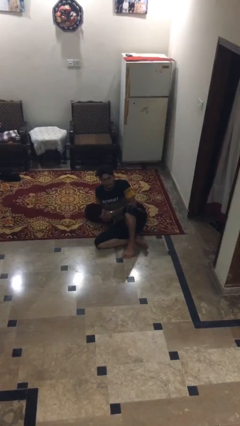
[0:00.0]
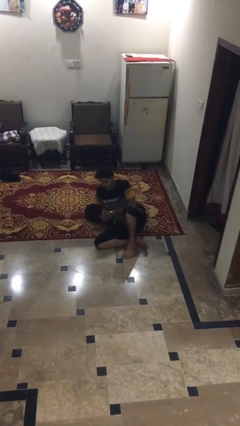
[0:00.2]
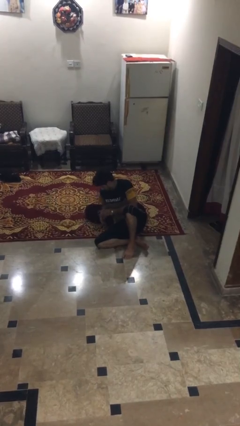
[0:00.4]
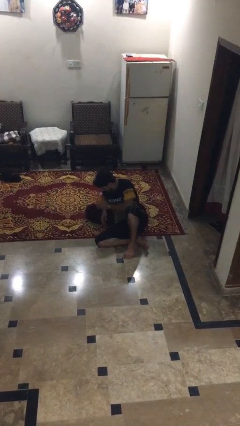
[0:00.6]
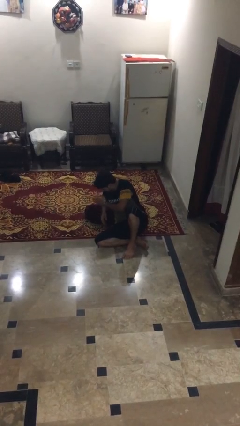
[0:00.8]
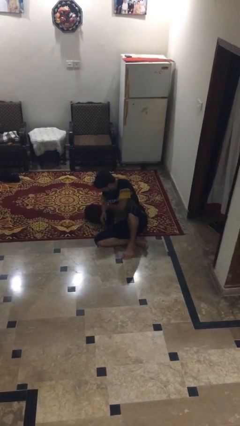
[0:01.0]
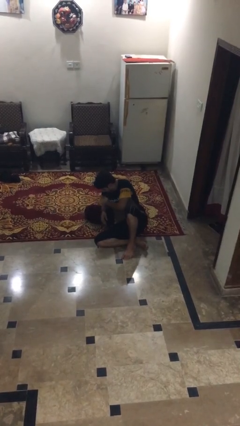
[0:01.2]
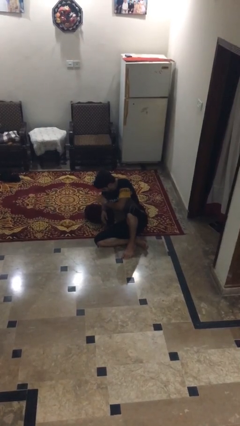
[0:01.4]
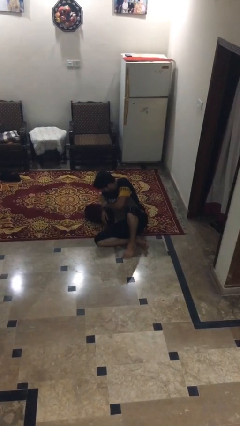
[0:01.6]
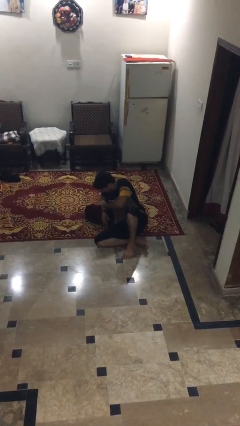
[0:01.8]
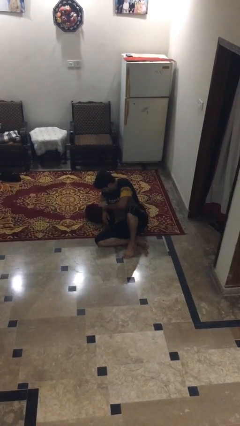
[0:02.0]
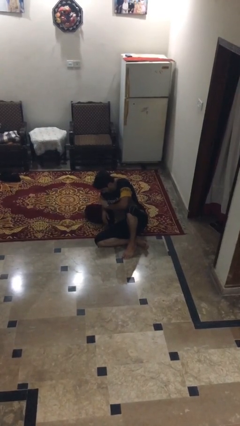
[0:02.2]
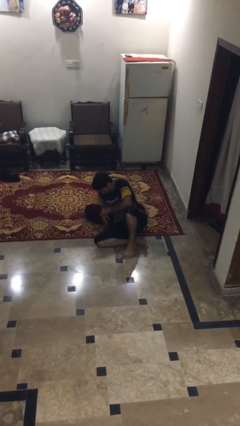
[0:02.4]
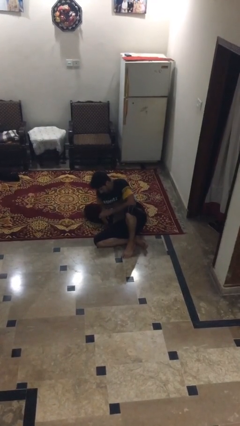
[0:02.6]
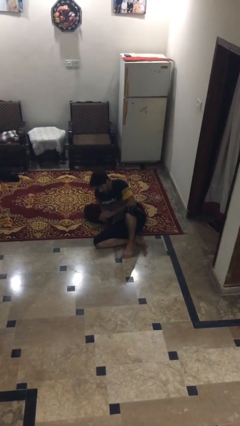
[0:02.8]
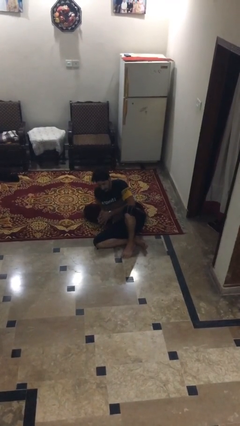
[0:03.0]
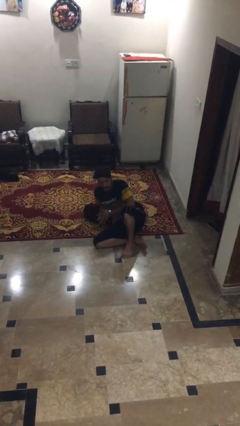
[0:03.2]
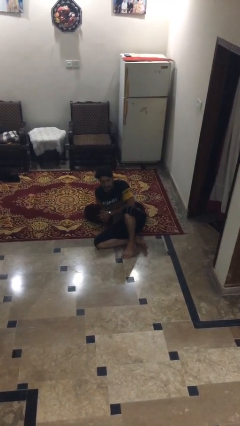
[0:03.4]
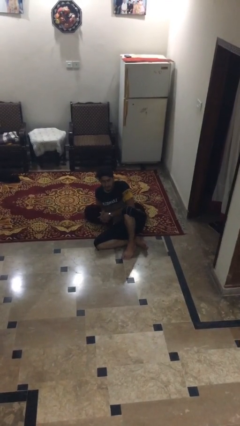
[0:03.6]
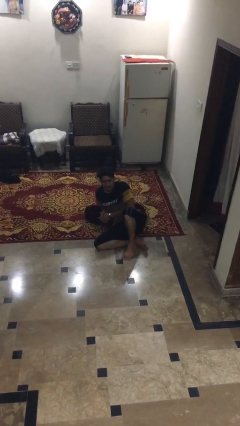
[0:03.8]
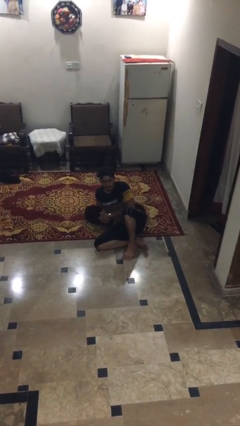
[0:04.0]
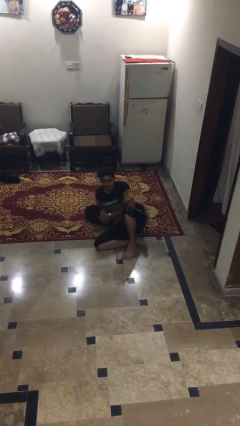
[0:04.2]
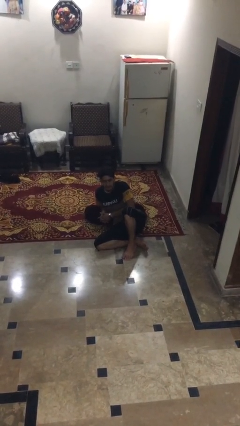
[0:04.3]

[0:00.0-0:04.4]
person swats bug

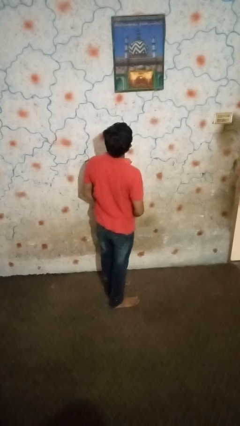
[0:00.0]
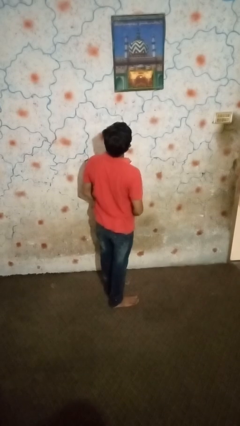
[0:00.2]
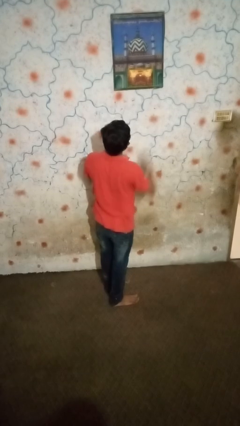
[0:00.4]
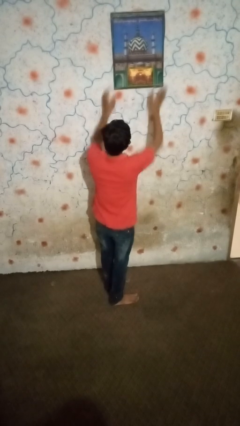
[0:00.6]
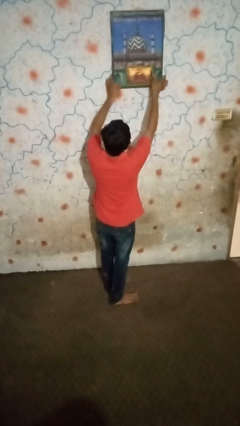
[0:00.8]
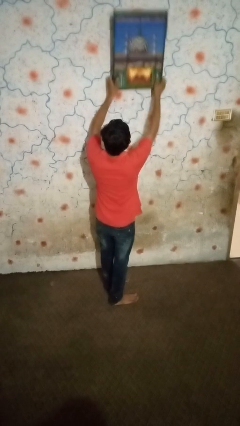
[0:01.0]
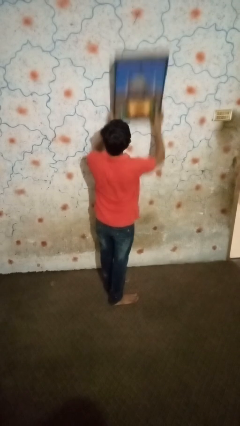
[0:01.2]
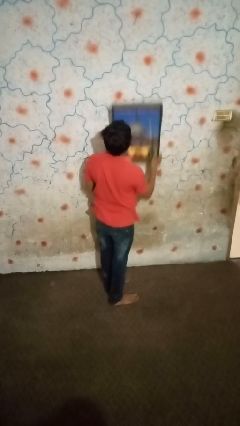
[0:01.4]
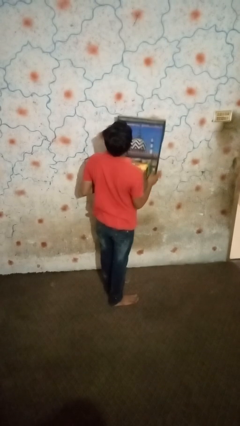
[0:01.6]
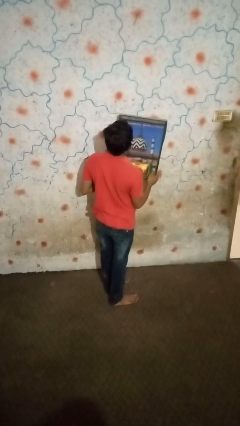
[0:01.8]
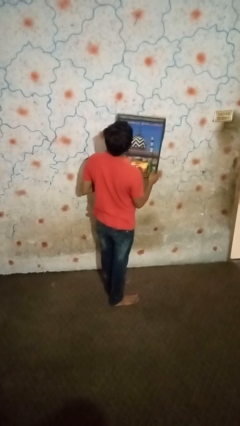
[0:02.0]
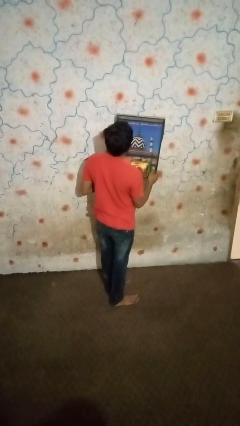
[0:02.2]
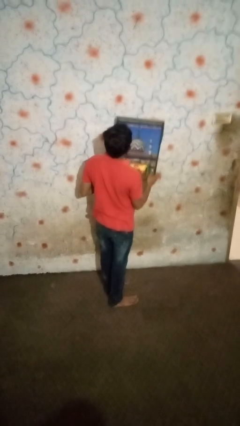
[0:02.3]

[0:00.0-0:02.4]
person takes down picture frame

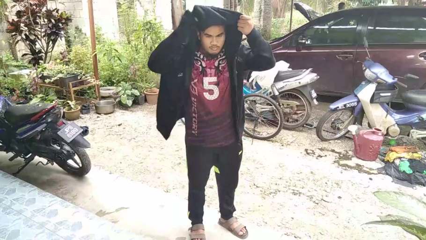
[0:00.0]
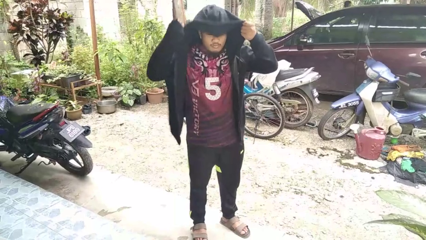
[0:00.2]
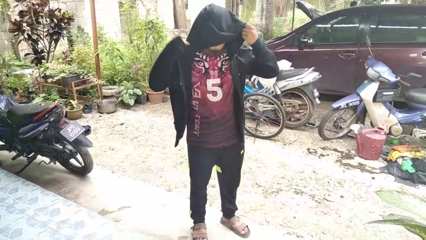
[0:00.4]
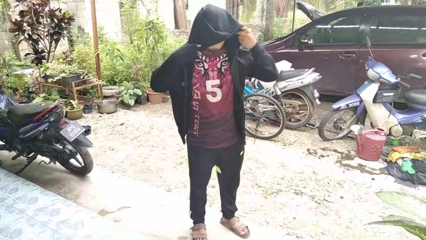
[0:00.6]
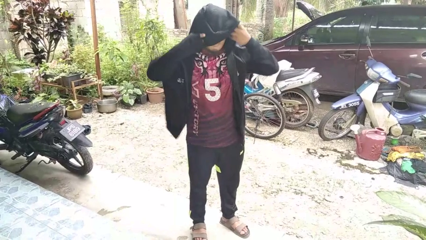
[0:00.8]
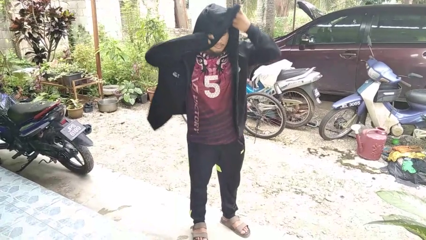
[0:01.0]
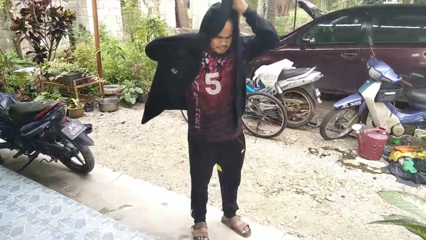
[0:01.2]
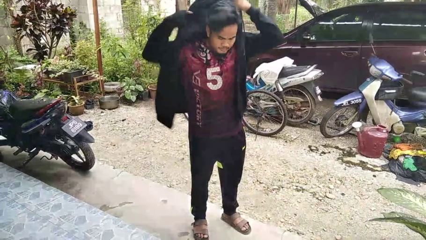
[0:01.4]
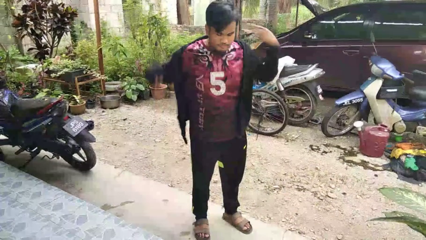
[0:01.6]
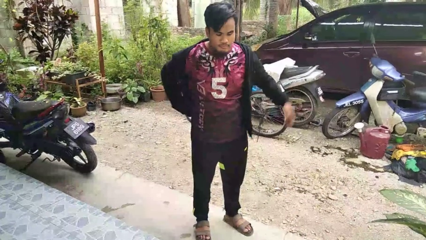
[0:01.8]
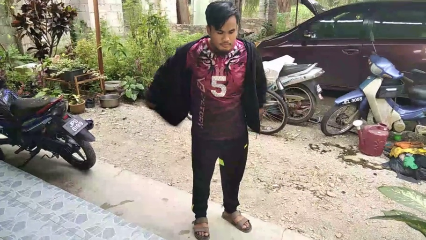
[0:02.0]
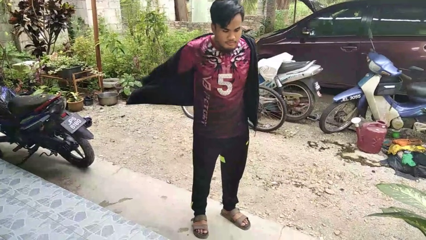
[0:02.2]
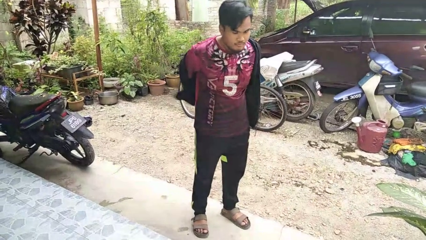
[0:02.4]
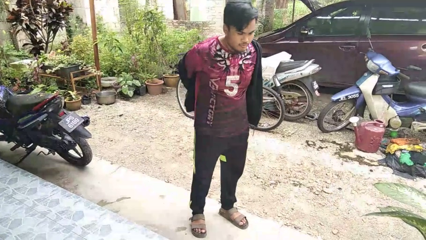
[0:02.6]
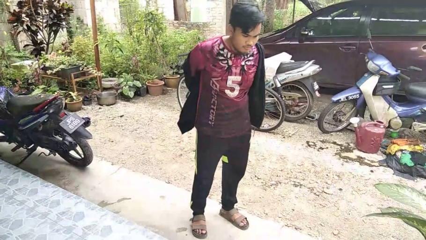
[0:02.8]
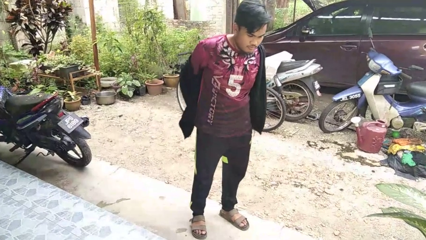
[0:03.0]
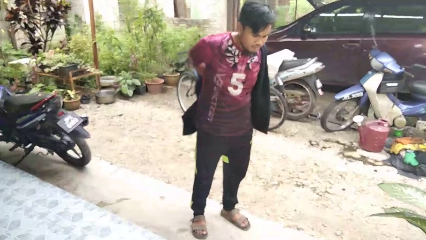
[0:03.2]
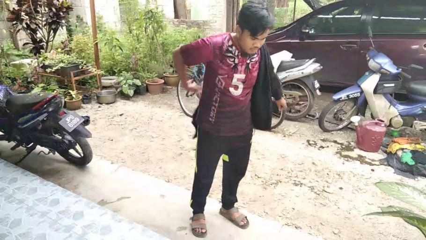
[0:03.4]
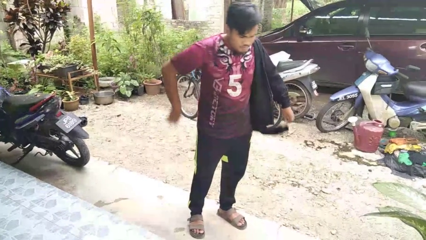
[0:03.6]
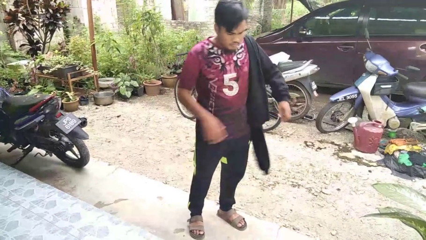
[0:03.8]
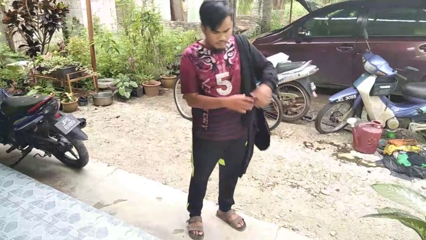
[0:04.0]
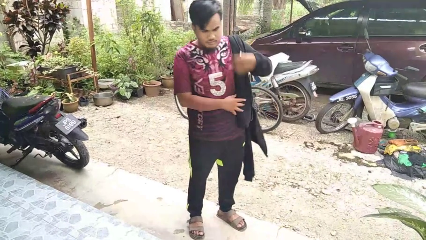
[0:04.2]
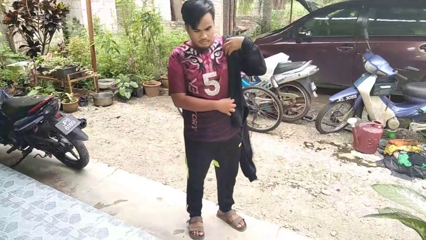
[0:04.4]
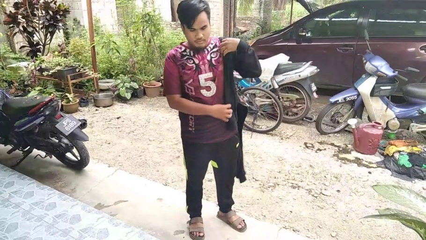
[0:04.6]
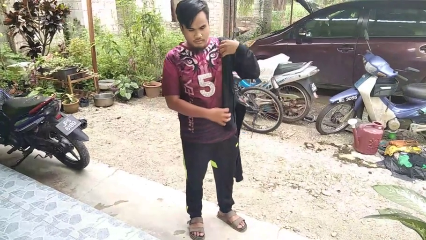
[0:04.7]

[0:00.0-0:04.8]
person takes off hoodie

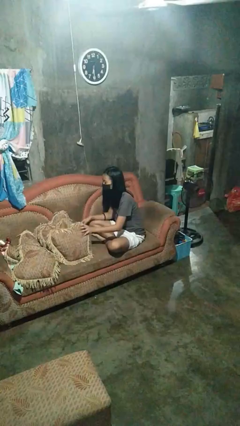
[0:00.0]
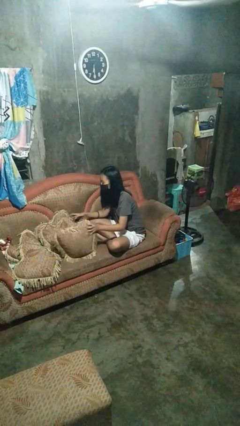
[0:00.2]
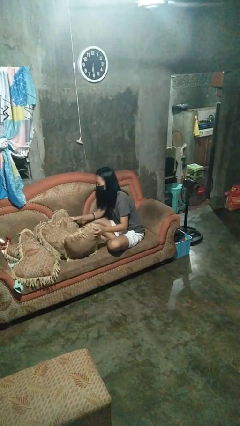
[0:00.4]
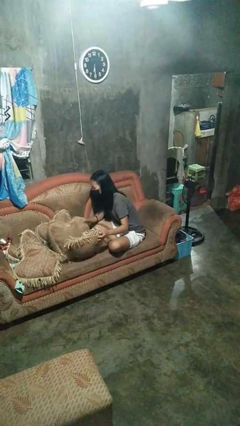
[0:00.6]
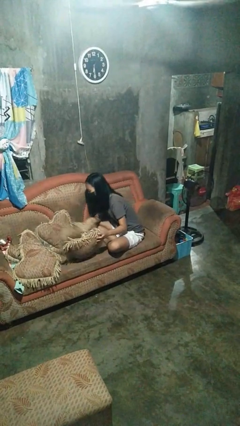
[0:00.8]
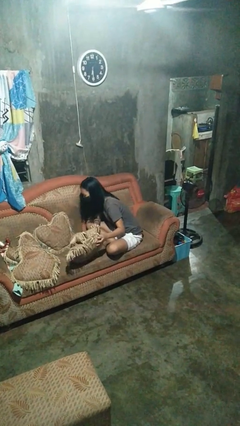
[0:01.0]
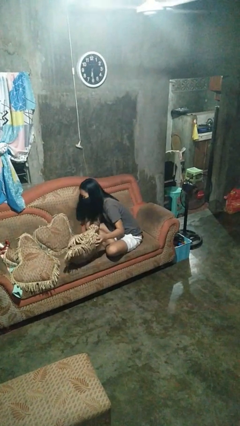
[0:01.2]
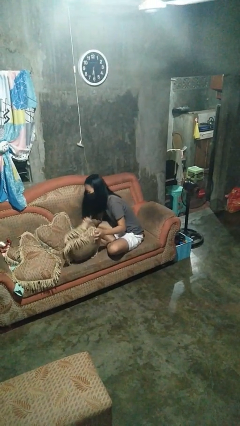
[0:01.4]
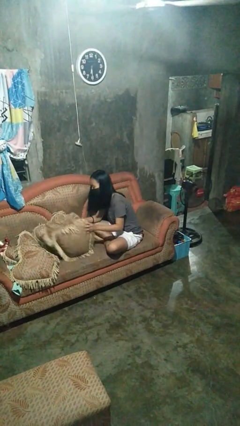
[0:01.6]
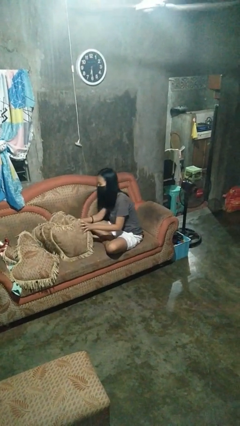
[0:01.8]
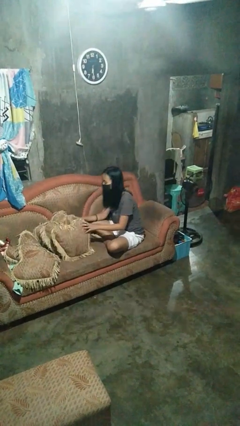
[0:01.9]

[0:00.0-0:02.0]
person searches in couch

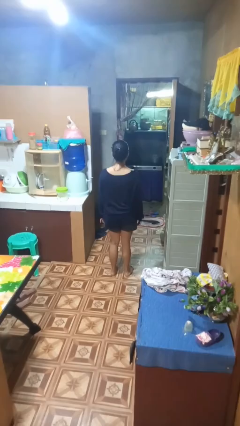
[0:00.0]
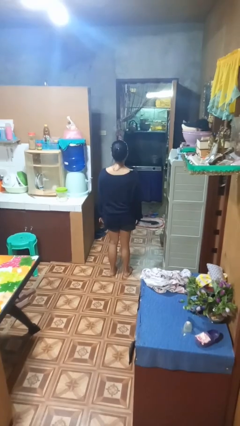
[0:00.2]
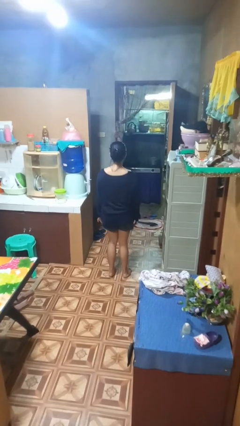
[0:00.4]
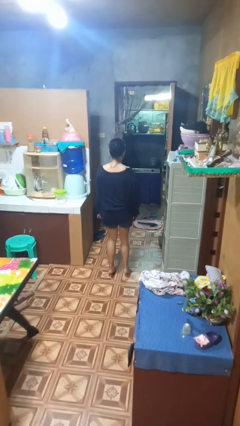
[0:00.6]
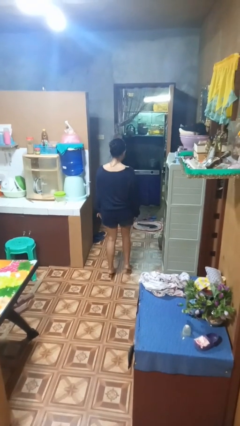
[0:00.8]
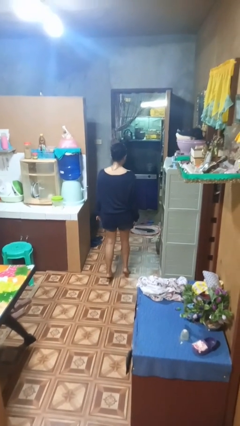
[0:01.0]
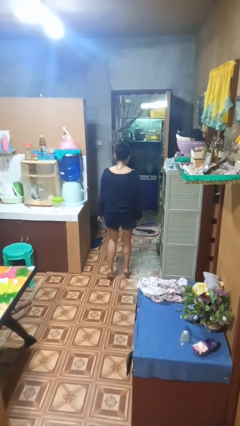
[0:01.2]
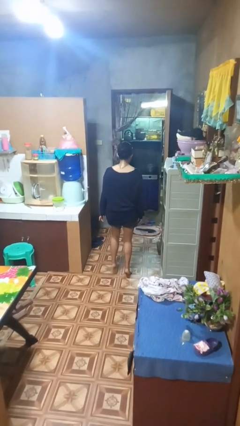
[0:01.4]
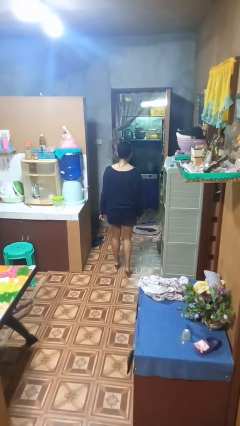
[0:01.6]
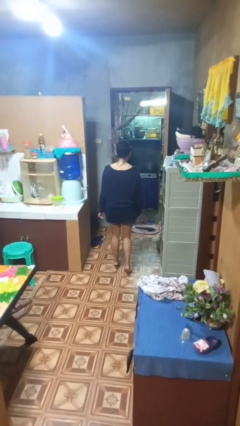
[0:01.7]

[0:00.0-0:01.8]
person walks tiptoe

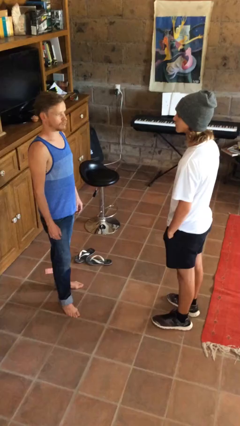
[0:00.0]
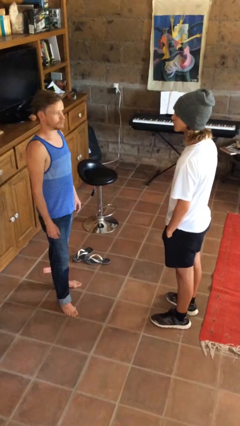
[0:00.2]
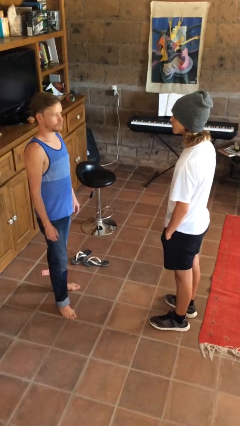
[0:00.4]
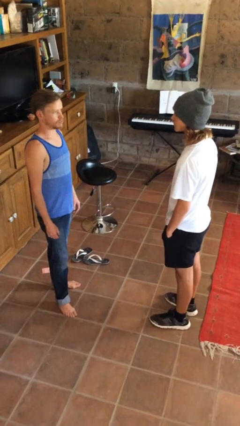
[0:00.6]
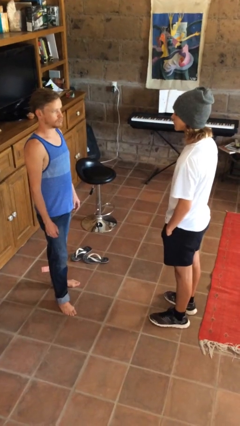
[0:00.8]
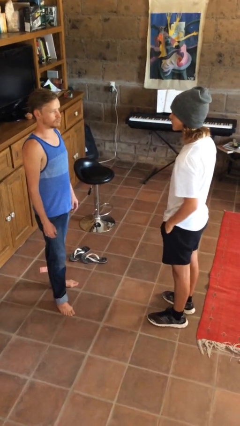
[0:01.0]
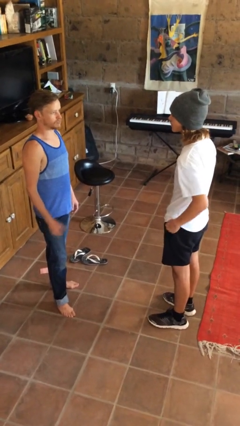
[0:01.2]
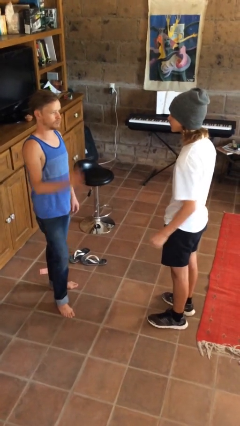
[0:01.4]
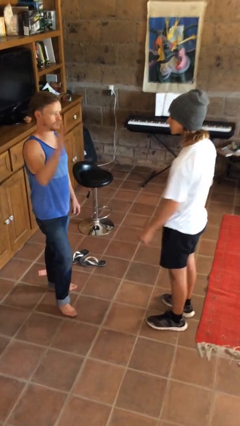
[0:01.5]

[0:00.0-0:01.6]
person highfives hand

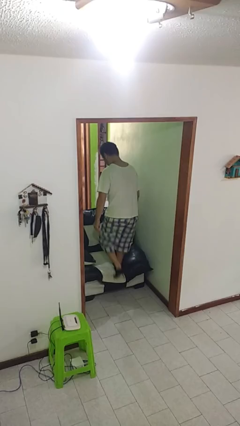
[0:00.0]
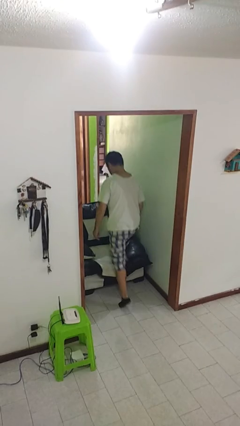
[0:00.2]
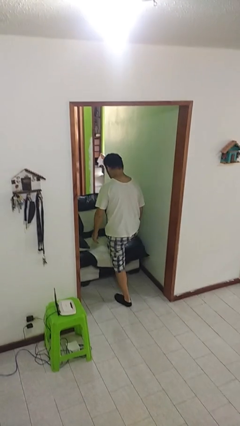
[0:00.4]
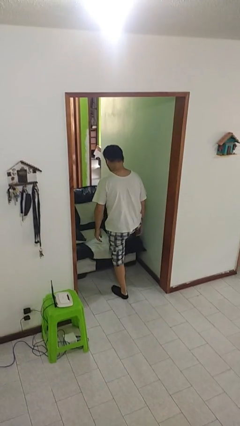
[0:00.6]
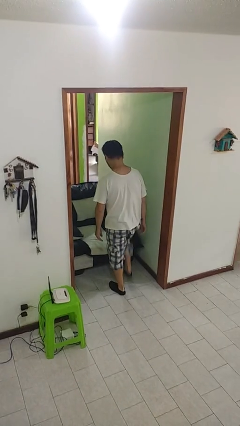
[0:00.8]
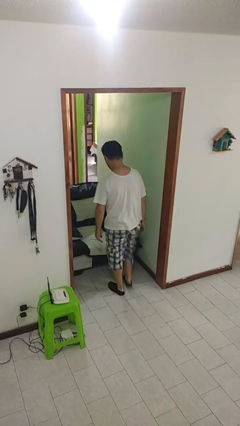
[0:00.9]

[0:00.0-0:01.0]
person climbs off couch
